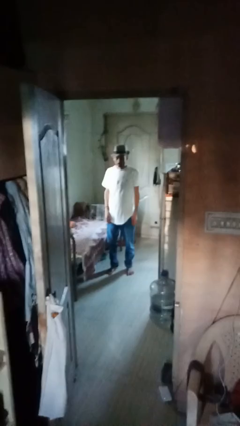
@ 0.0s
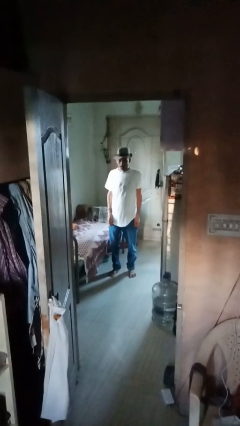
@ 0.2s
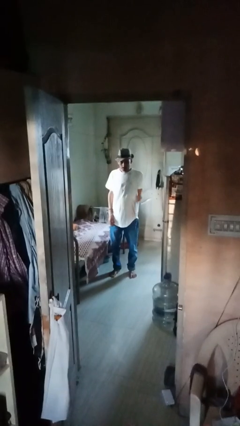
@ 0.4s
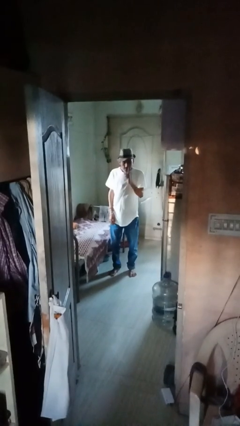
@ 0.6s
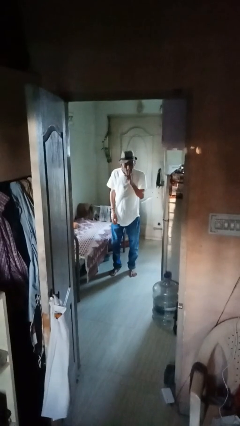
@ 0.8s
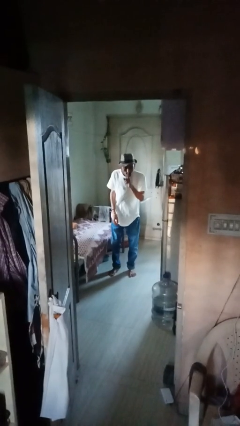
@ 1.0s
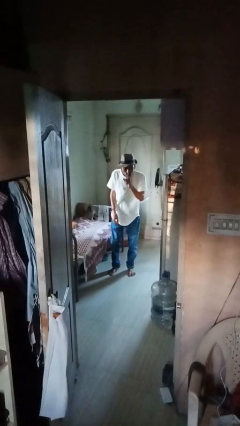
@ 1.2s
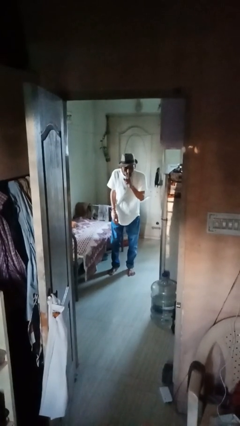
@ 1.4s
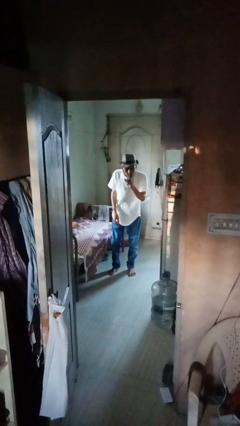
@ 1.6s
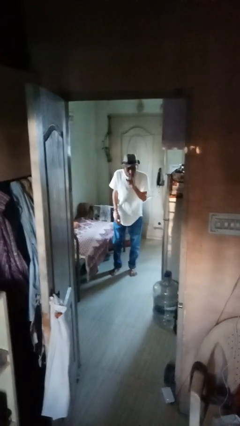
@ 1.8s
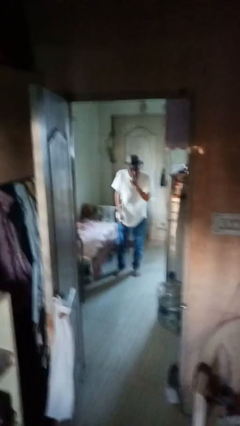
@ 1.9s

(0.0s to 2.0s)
person gestures be quiet

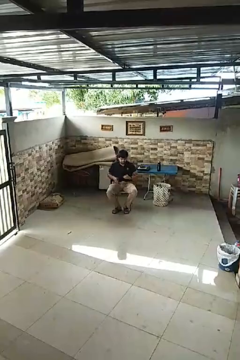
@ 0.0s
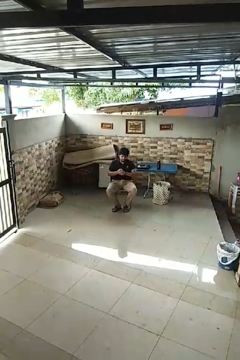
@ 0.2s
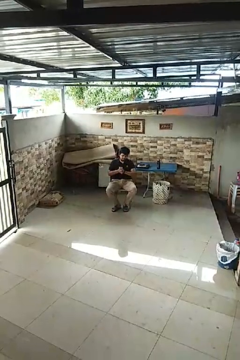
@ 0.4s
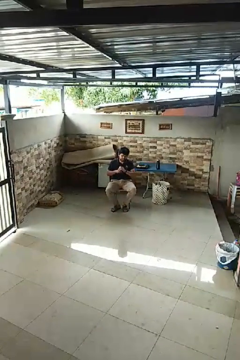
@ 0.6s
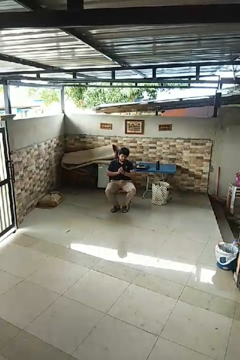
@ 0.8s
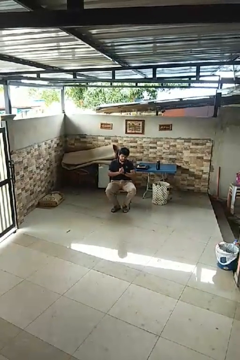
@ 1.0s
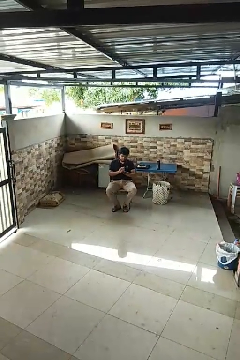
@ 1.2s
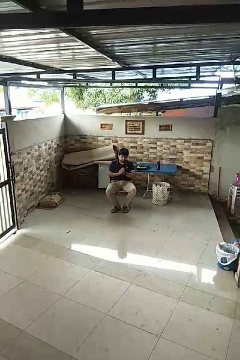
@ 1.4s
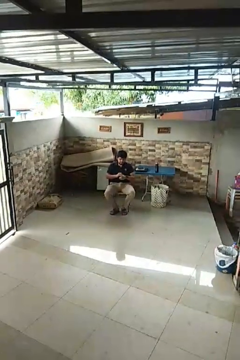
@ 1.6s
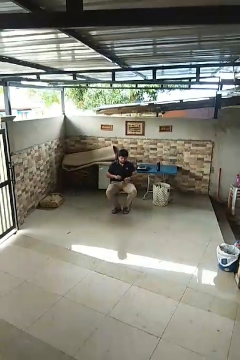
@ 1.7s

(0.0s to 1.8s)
person cracks knuckles

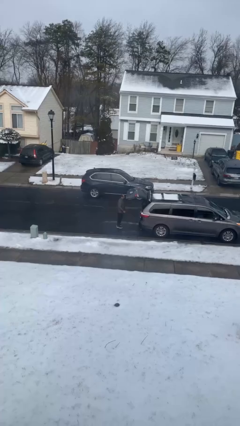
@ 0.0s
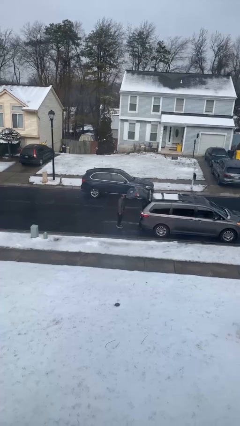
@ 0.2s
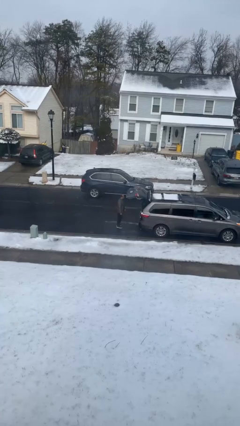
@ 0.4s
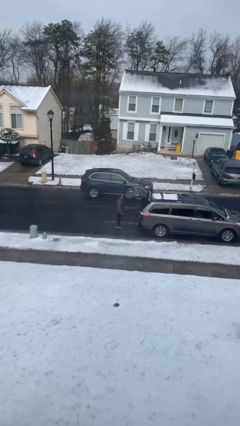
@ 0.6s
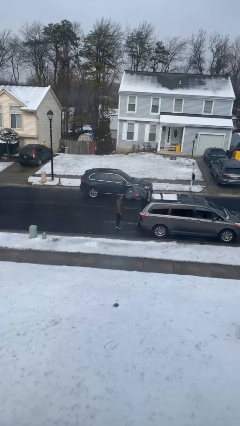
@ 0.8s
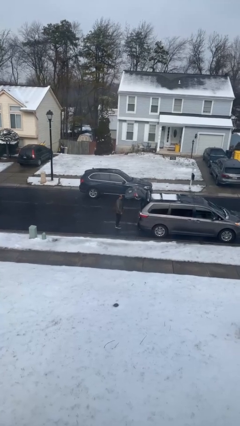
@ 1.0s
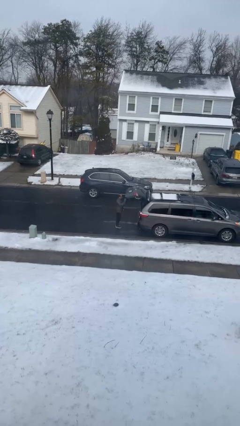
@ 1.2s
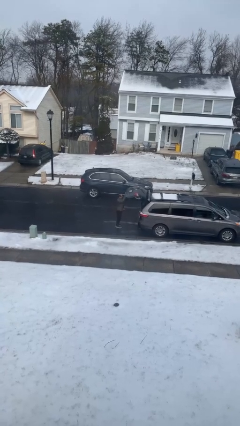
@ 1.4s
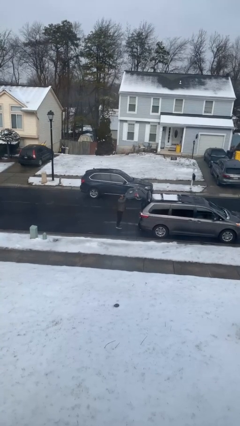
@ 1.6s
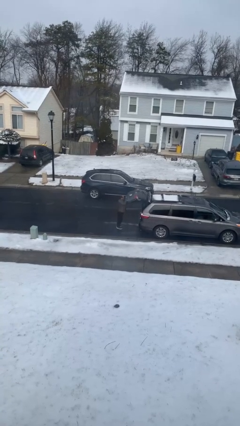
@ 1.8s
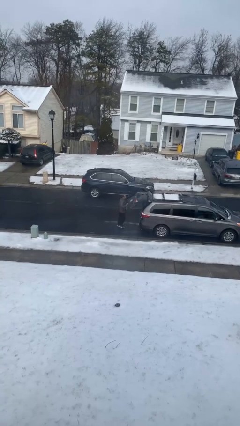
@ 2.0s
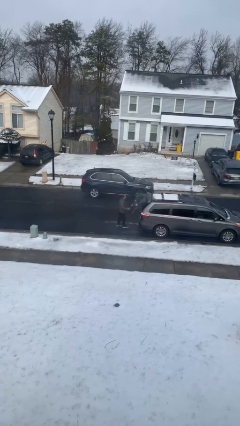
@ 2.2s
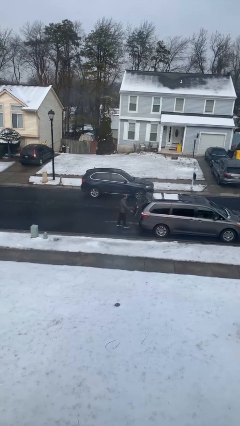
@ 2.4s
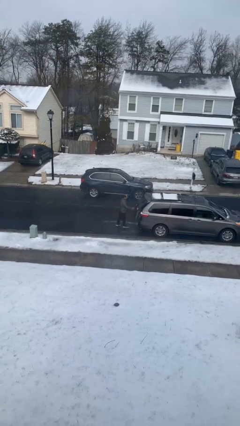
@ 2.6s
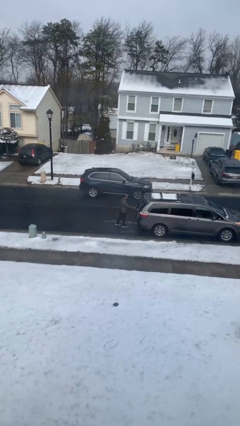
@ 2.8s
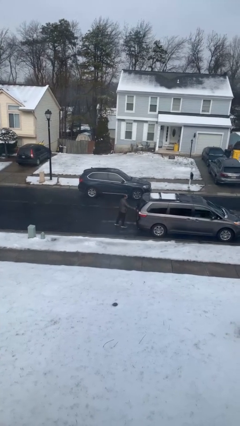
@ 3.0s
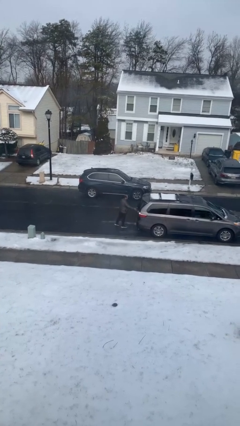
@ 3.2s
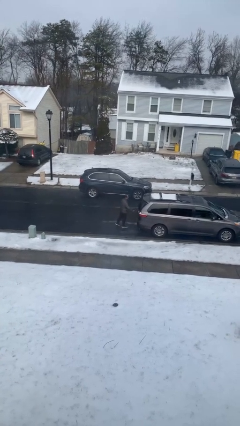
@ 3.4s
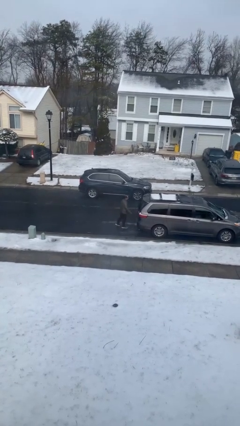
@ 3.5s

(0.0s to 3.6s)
person closes car trunk

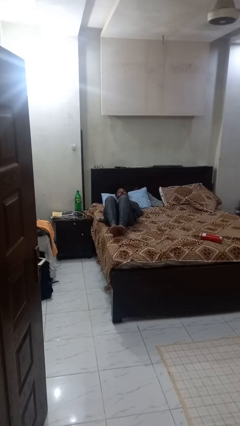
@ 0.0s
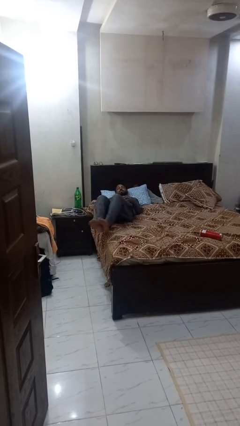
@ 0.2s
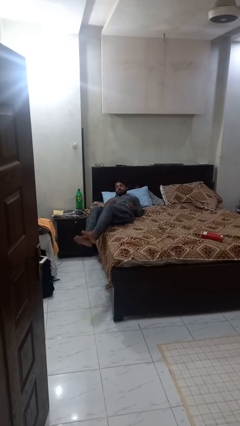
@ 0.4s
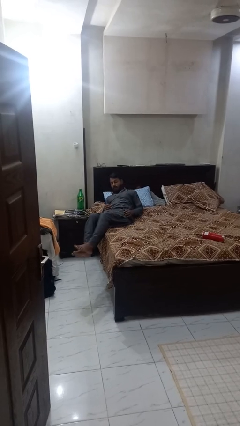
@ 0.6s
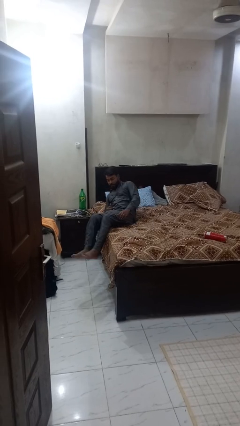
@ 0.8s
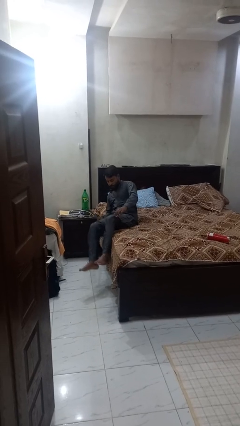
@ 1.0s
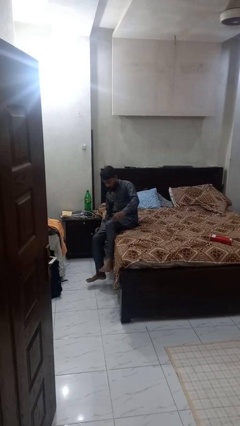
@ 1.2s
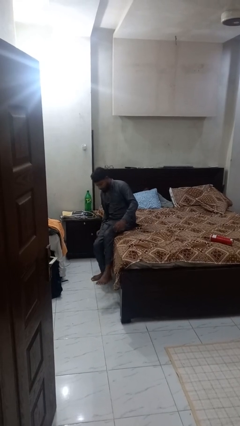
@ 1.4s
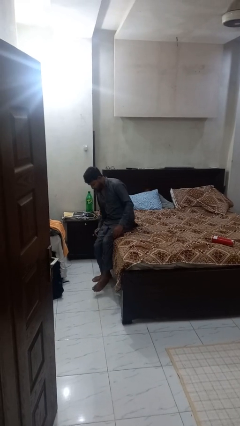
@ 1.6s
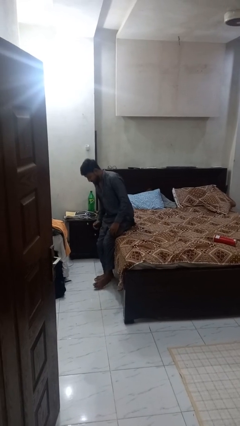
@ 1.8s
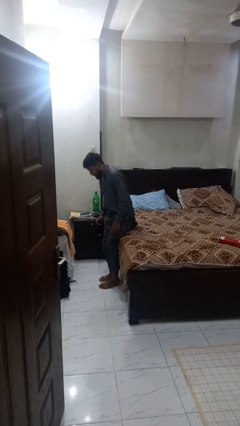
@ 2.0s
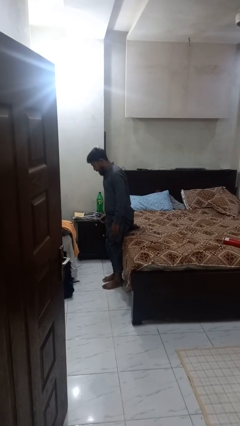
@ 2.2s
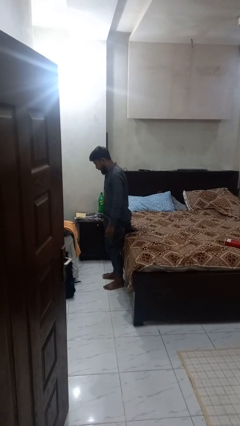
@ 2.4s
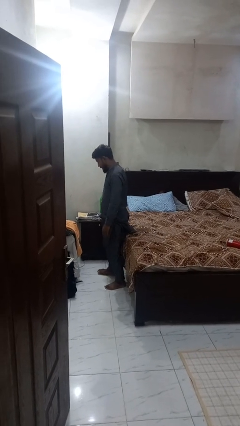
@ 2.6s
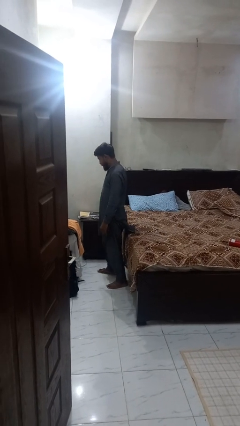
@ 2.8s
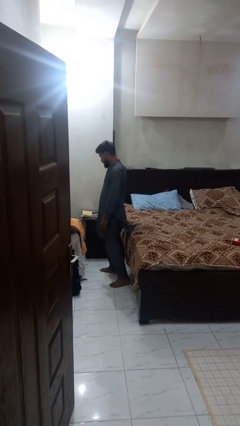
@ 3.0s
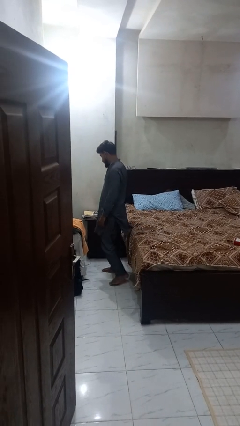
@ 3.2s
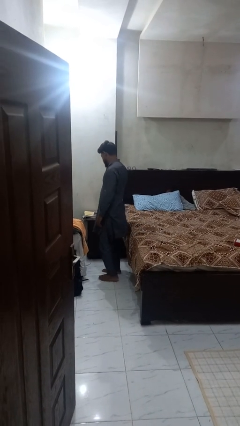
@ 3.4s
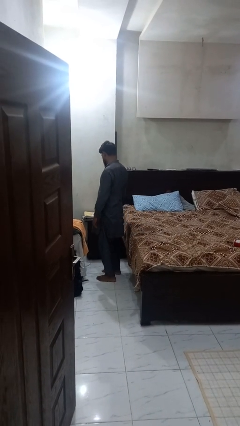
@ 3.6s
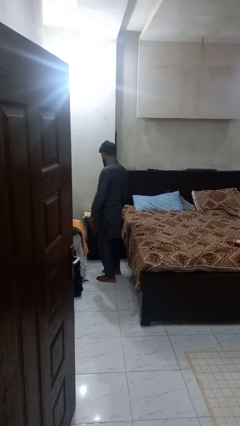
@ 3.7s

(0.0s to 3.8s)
person stands up

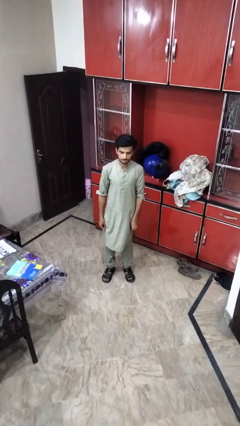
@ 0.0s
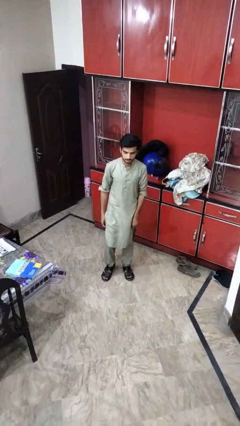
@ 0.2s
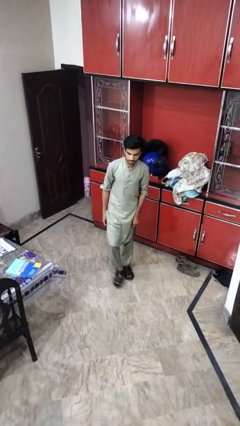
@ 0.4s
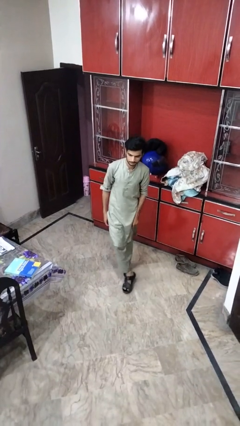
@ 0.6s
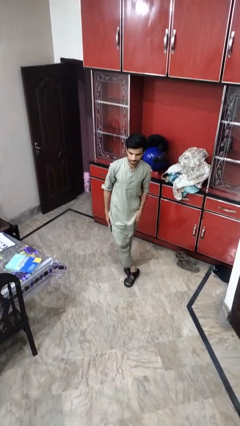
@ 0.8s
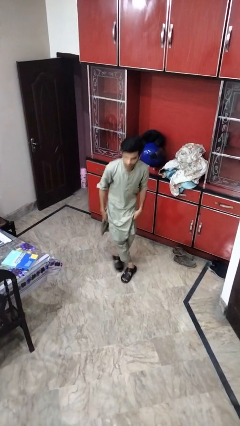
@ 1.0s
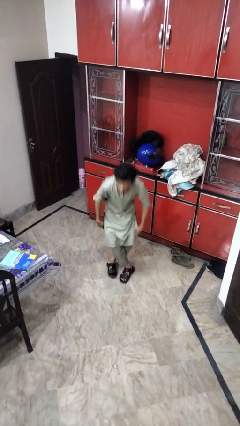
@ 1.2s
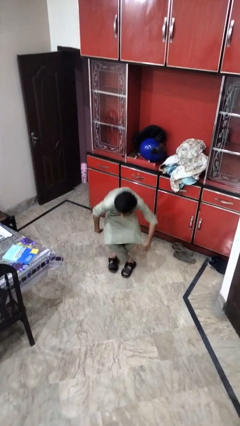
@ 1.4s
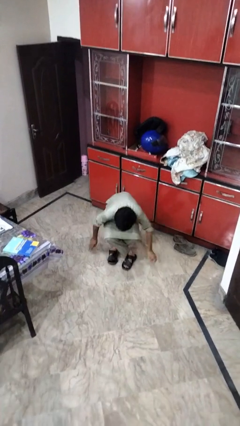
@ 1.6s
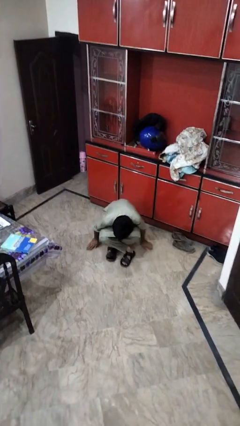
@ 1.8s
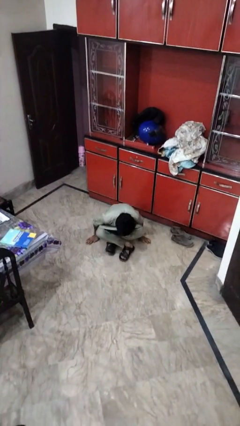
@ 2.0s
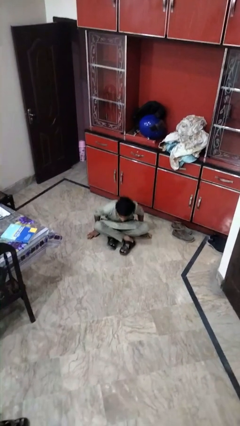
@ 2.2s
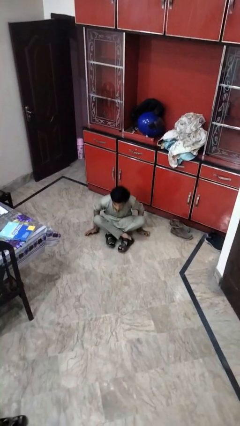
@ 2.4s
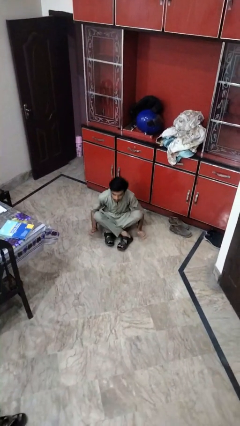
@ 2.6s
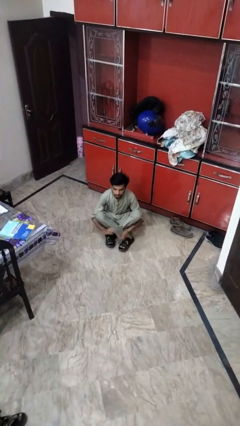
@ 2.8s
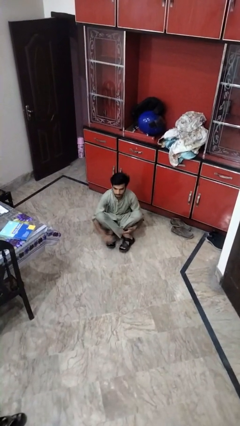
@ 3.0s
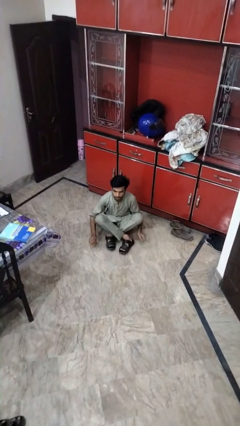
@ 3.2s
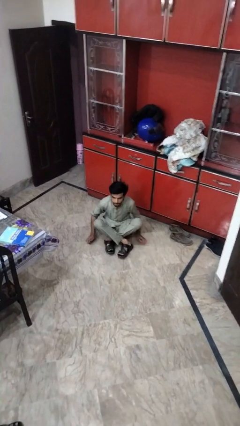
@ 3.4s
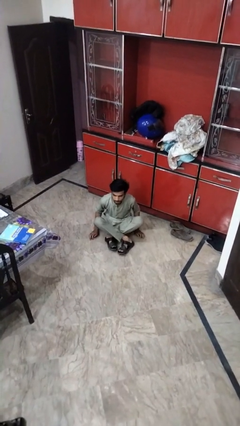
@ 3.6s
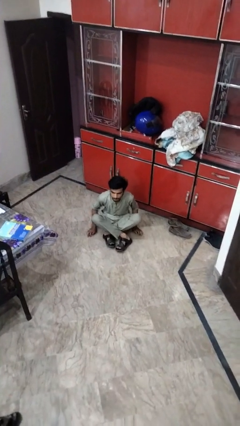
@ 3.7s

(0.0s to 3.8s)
person sits crisscross

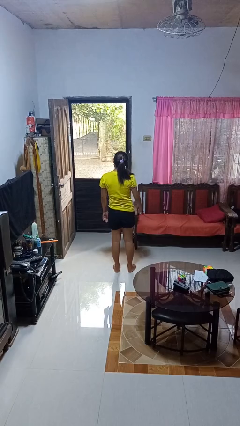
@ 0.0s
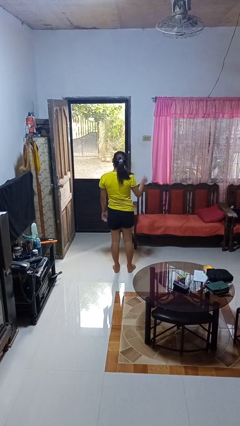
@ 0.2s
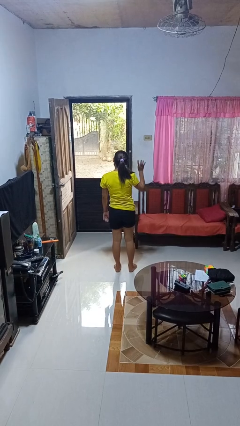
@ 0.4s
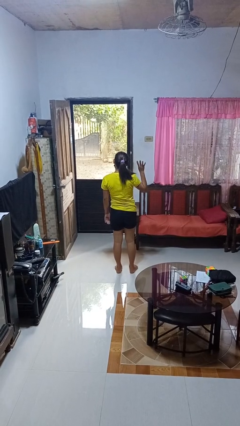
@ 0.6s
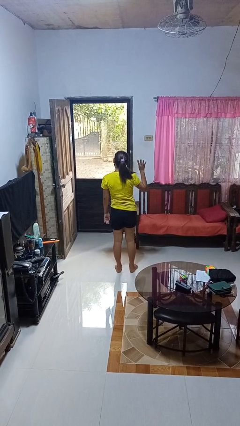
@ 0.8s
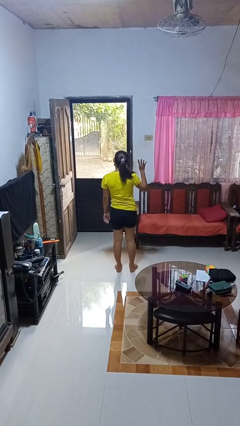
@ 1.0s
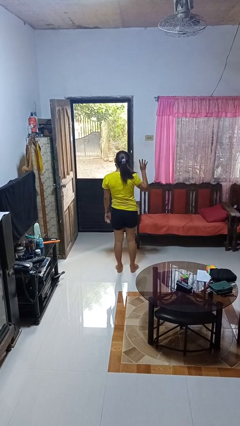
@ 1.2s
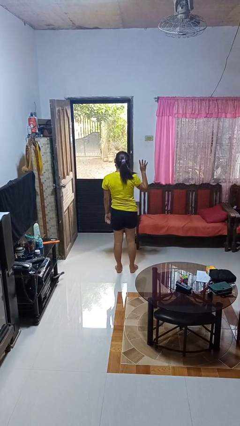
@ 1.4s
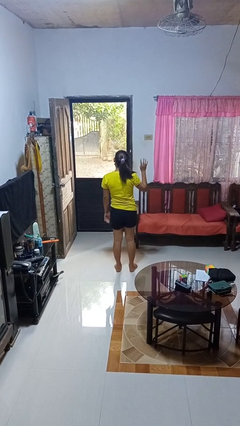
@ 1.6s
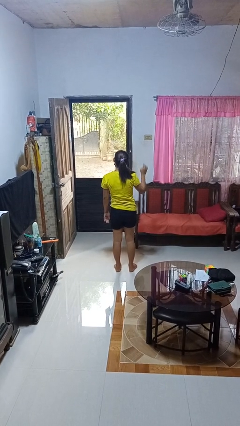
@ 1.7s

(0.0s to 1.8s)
person gestures number four

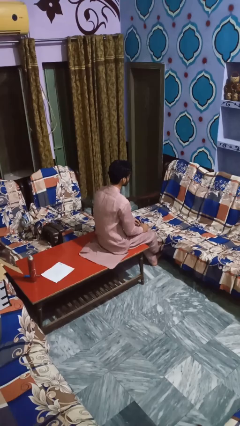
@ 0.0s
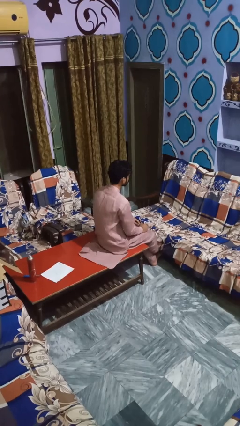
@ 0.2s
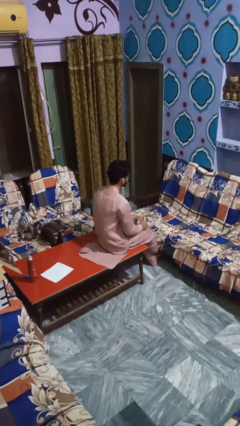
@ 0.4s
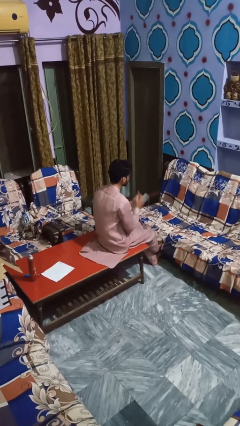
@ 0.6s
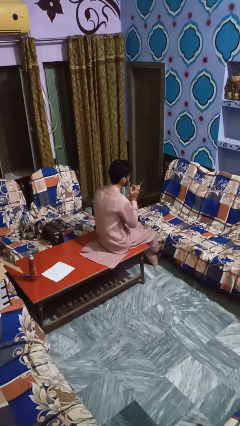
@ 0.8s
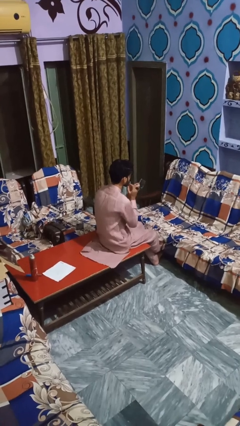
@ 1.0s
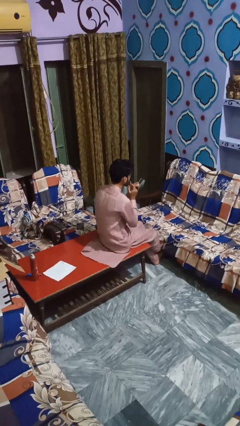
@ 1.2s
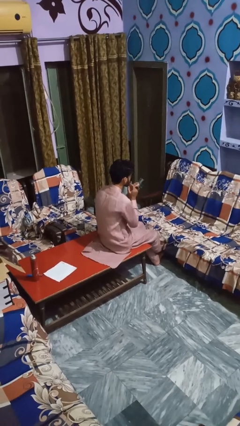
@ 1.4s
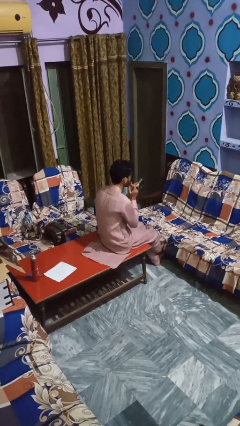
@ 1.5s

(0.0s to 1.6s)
person applies lip makeup
